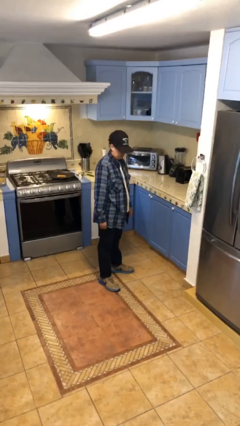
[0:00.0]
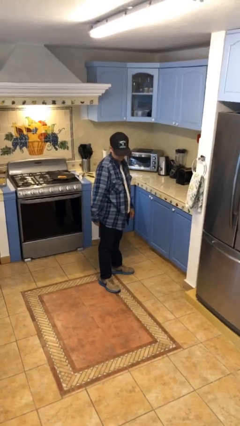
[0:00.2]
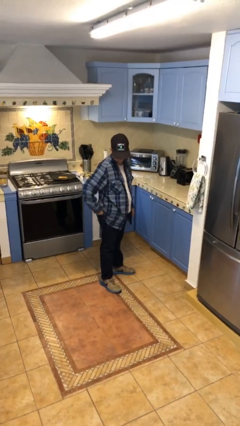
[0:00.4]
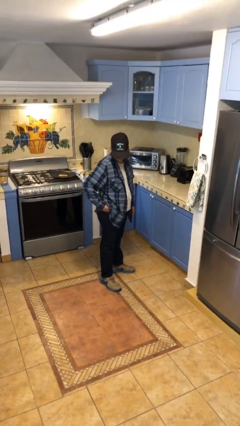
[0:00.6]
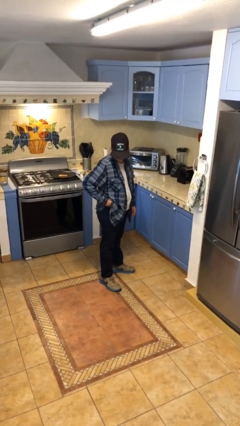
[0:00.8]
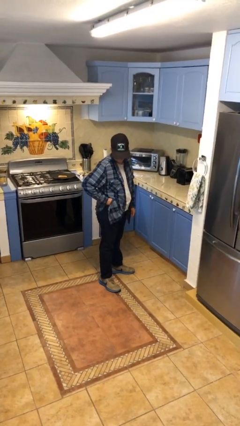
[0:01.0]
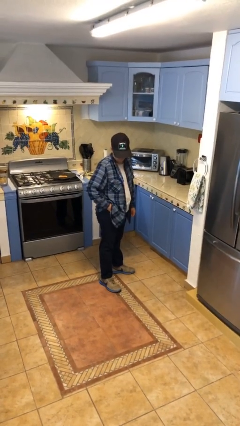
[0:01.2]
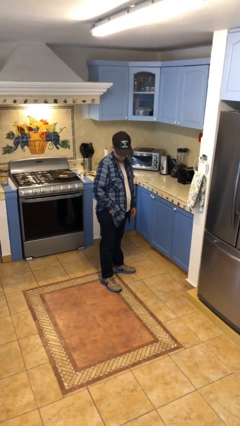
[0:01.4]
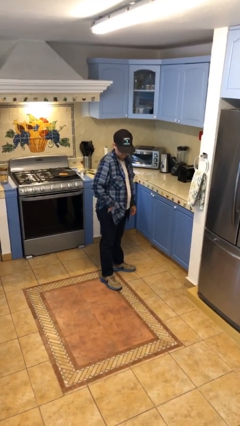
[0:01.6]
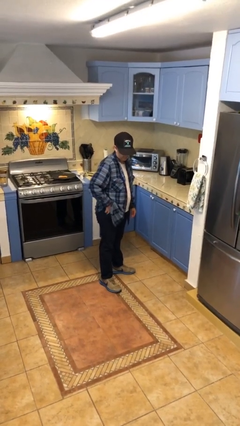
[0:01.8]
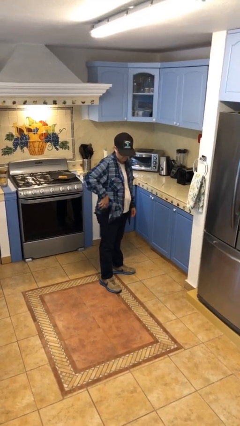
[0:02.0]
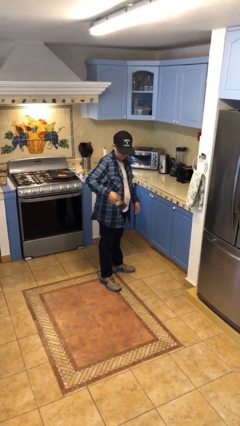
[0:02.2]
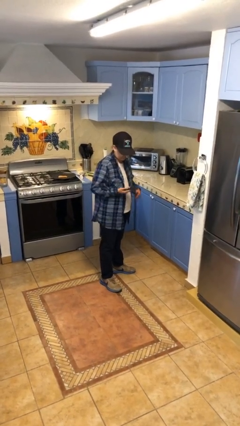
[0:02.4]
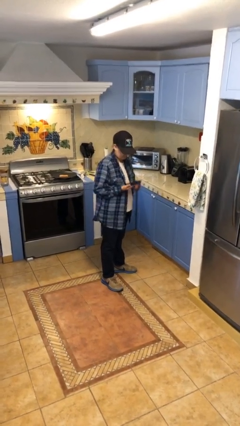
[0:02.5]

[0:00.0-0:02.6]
person takes phone from pocket

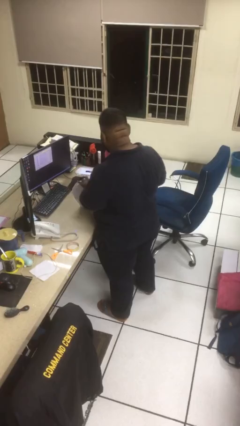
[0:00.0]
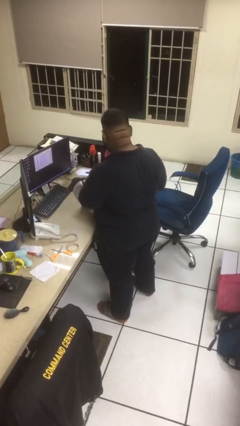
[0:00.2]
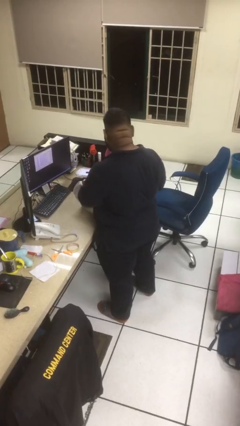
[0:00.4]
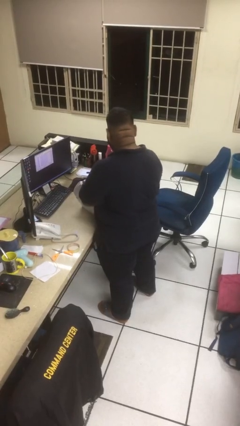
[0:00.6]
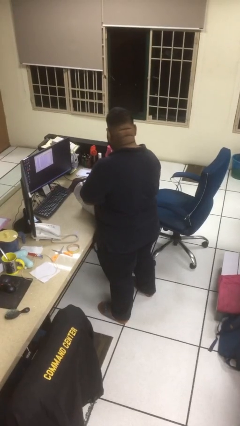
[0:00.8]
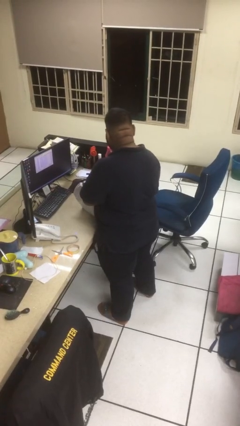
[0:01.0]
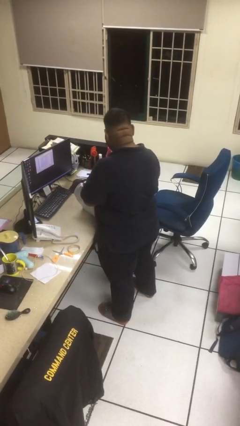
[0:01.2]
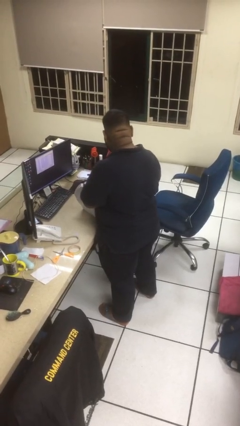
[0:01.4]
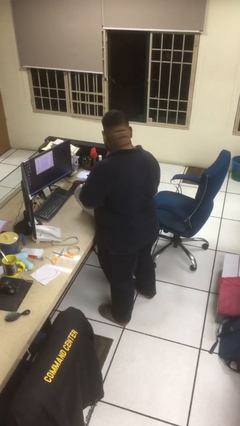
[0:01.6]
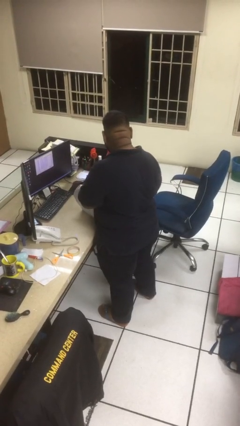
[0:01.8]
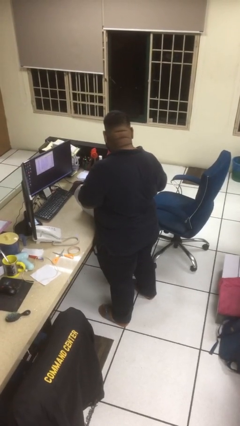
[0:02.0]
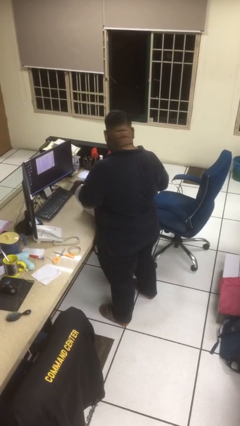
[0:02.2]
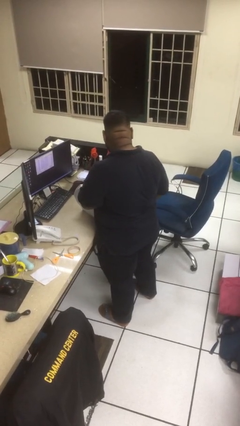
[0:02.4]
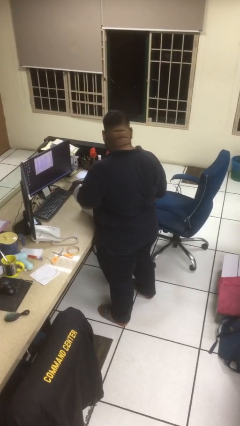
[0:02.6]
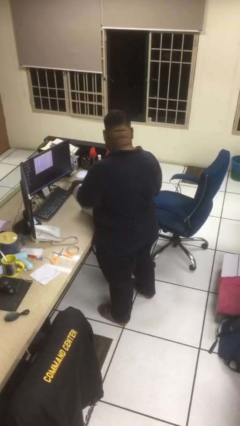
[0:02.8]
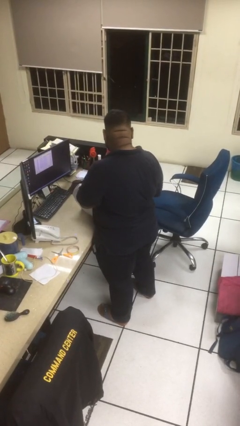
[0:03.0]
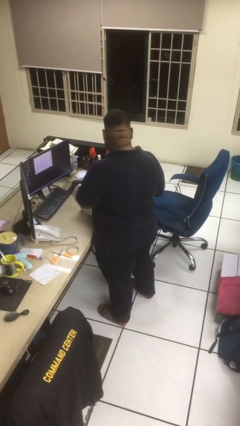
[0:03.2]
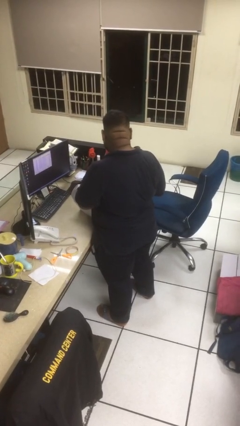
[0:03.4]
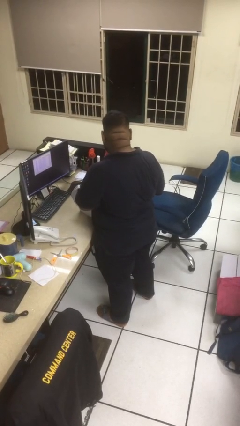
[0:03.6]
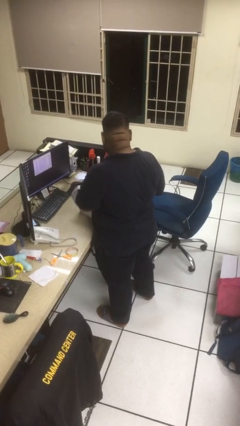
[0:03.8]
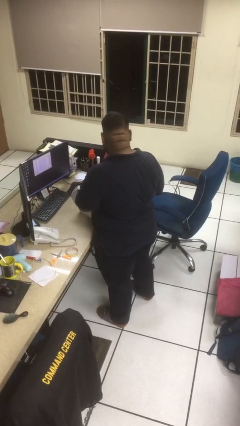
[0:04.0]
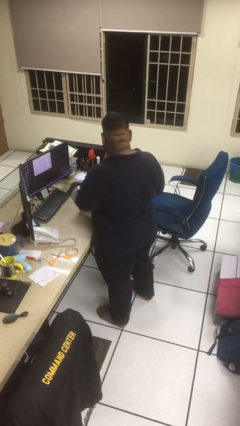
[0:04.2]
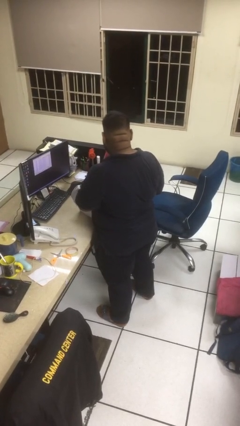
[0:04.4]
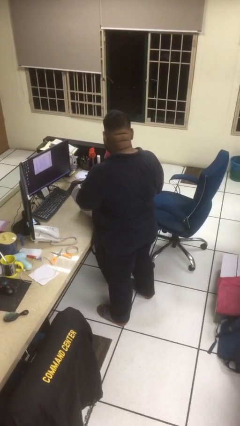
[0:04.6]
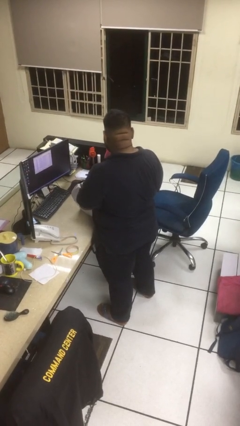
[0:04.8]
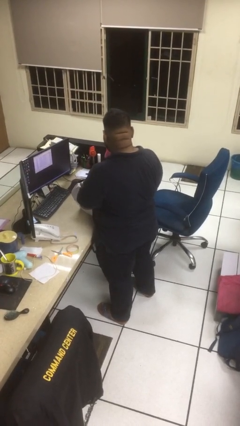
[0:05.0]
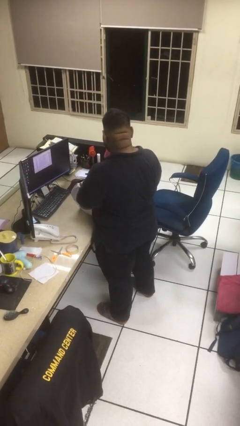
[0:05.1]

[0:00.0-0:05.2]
person wraps box

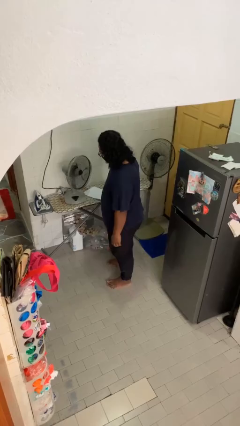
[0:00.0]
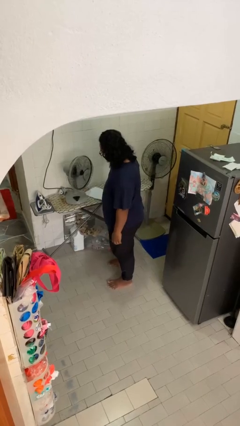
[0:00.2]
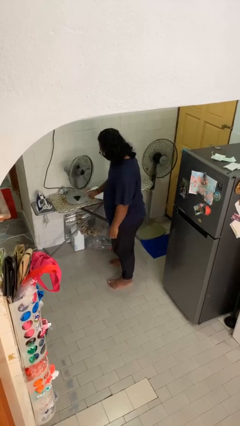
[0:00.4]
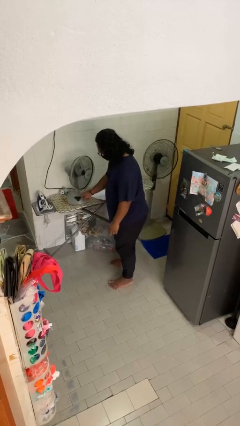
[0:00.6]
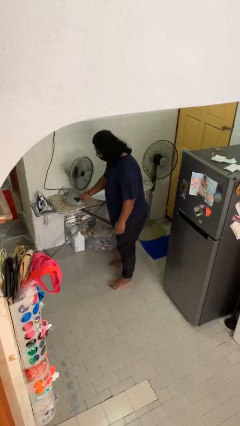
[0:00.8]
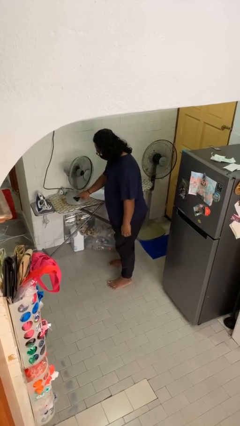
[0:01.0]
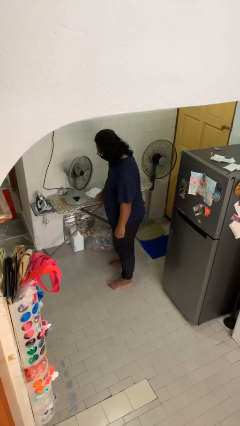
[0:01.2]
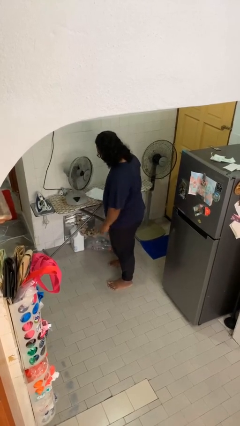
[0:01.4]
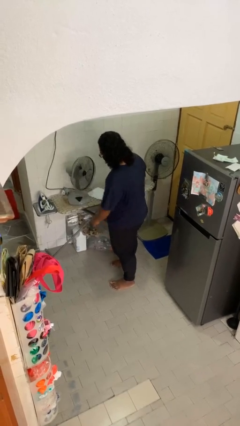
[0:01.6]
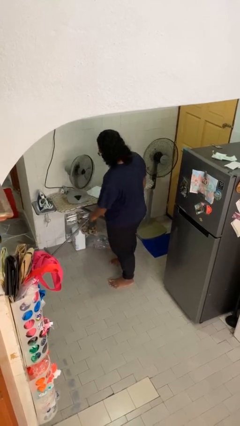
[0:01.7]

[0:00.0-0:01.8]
person turns on fan

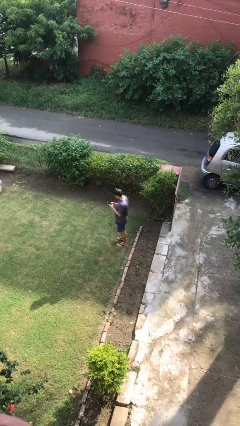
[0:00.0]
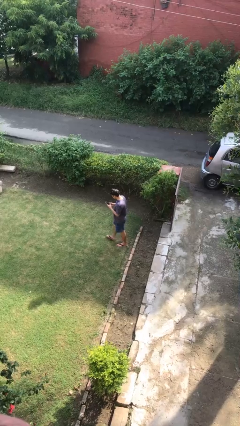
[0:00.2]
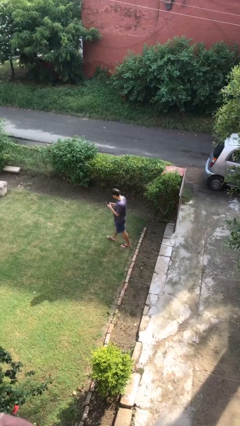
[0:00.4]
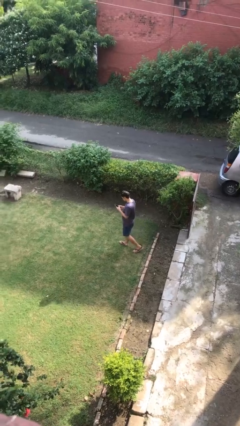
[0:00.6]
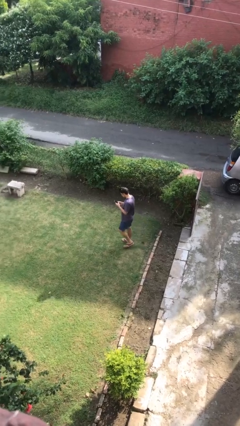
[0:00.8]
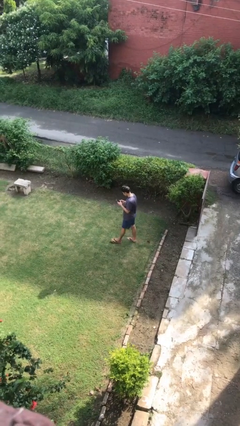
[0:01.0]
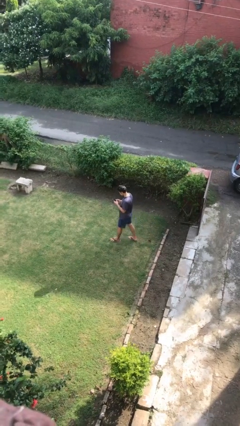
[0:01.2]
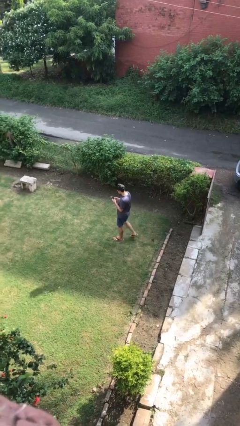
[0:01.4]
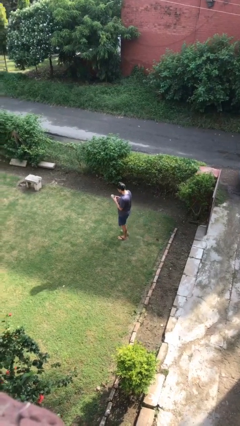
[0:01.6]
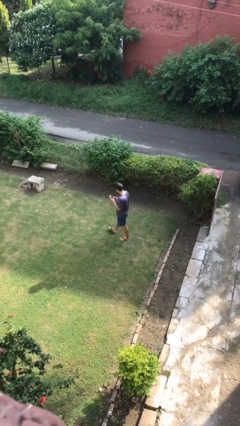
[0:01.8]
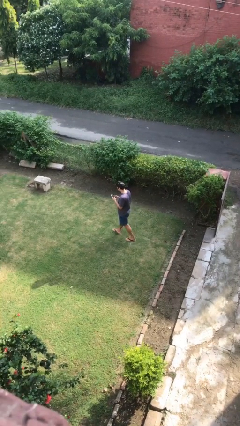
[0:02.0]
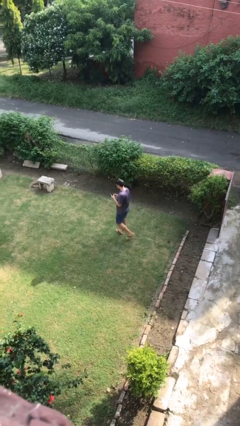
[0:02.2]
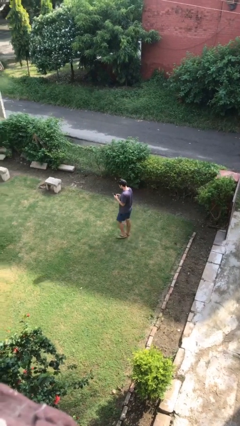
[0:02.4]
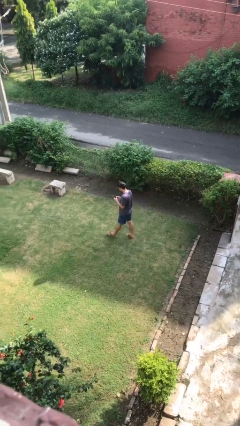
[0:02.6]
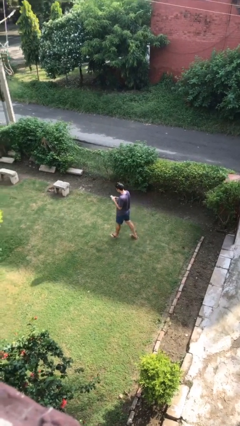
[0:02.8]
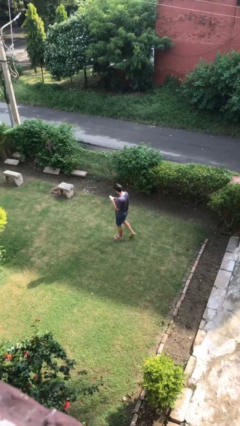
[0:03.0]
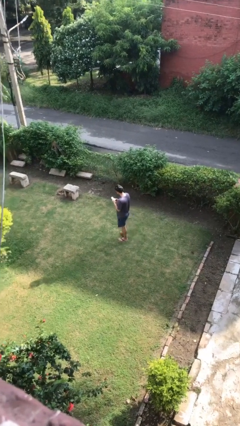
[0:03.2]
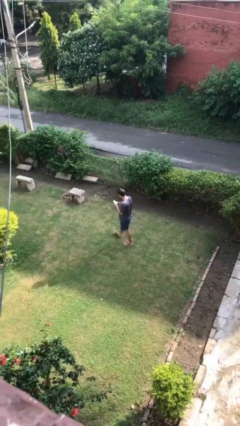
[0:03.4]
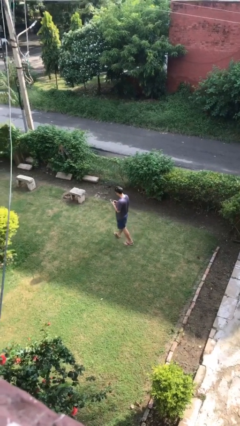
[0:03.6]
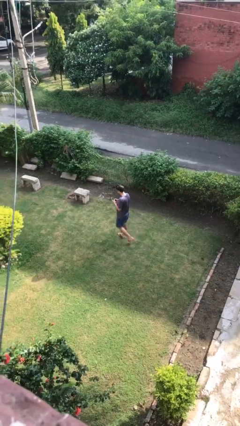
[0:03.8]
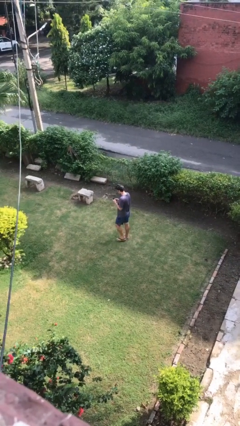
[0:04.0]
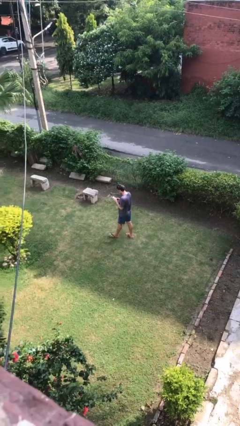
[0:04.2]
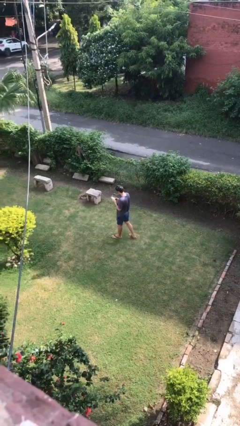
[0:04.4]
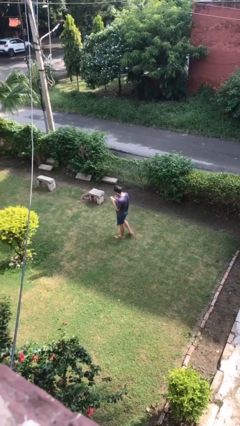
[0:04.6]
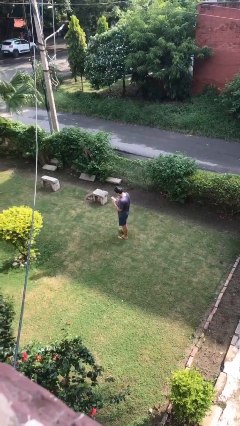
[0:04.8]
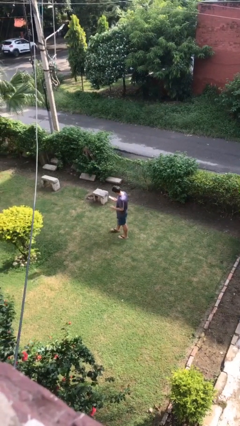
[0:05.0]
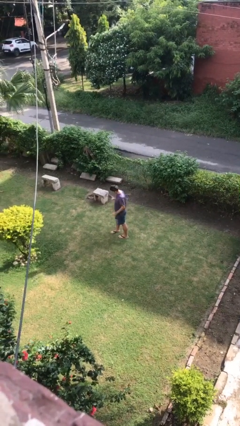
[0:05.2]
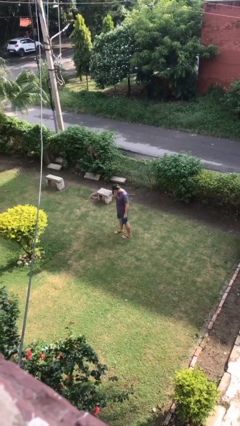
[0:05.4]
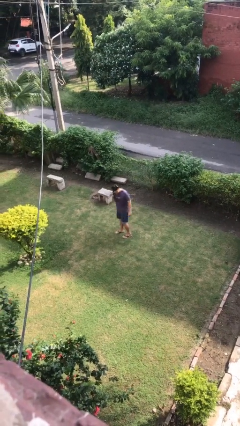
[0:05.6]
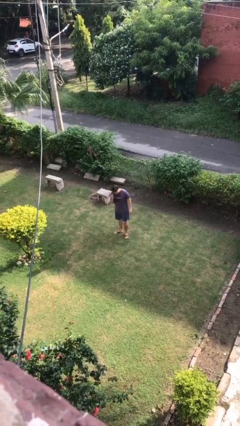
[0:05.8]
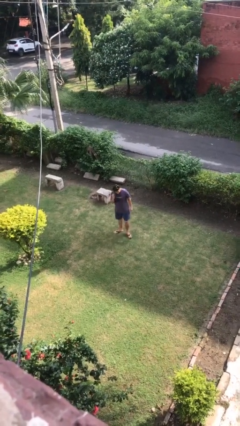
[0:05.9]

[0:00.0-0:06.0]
person texts on phone

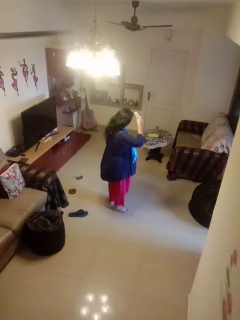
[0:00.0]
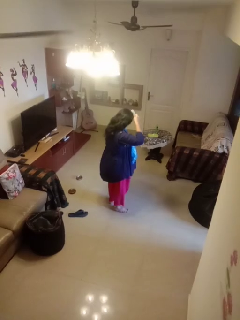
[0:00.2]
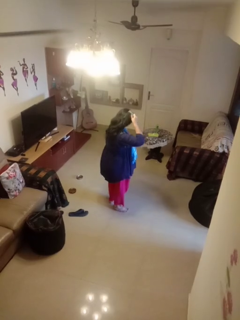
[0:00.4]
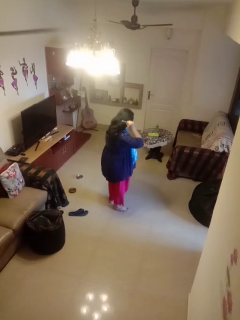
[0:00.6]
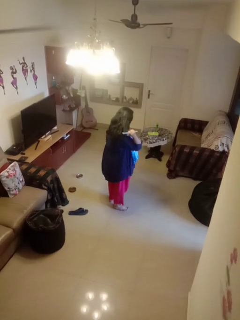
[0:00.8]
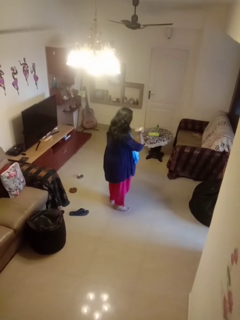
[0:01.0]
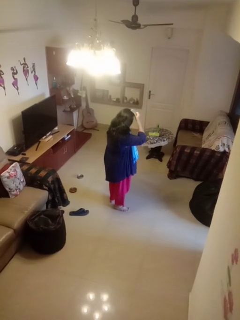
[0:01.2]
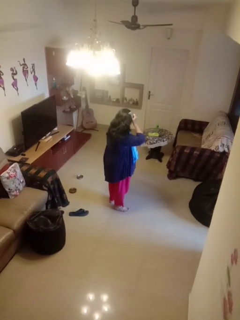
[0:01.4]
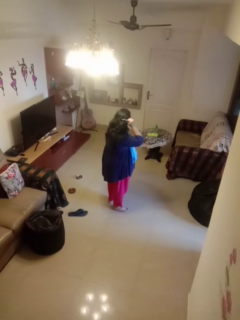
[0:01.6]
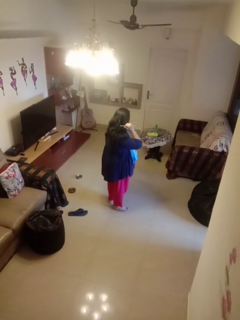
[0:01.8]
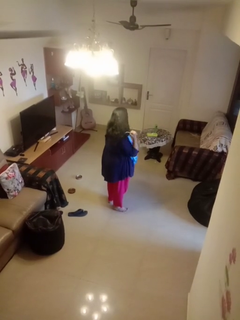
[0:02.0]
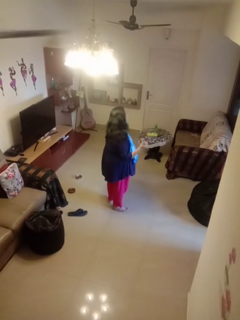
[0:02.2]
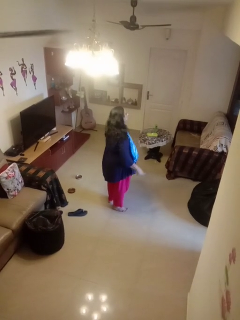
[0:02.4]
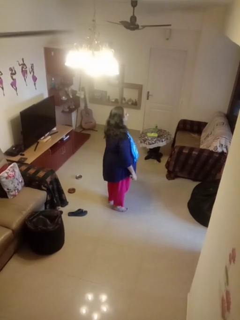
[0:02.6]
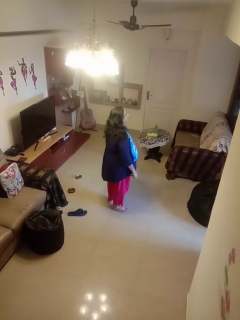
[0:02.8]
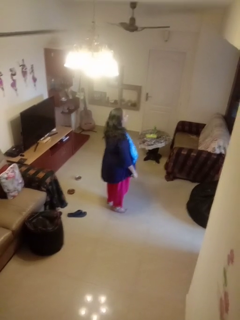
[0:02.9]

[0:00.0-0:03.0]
person brushes hair
